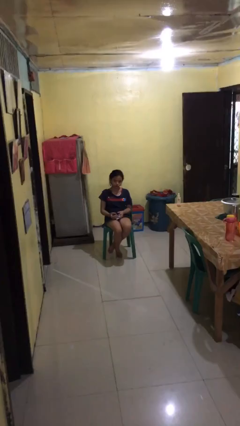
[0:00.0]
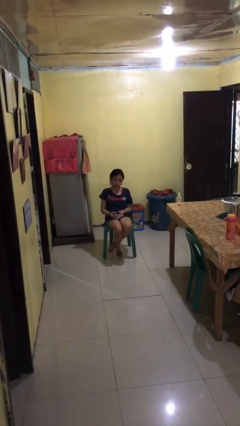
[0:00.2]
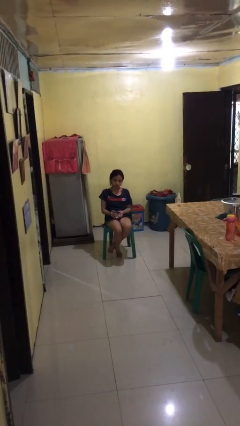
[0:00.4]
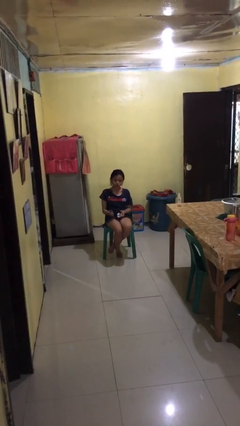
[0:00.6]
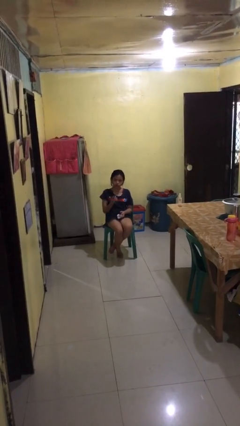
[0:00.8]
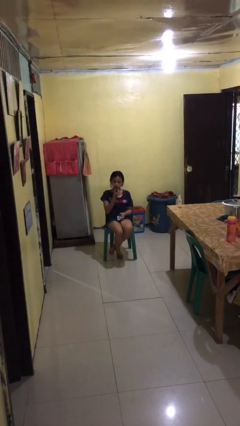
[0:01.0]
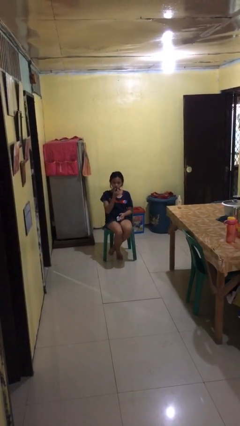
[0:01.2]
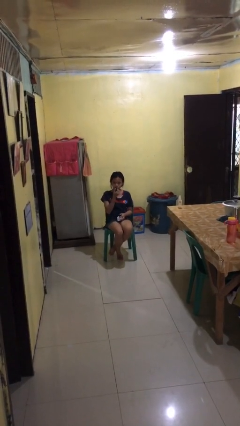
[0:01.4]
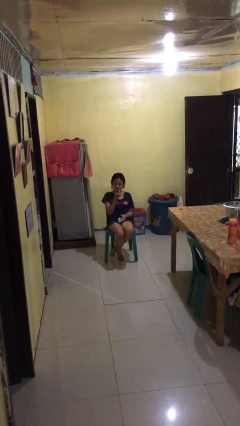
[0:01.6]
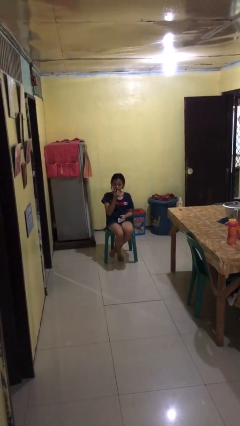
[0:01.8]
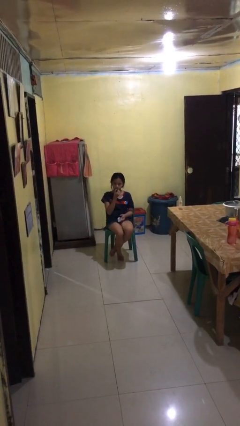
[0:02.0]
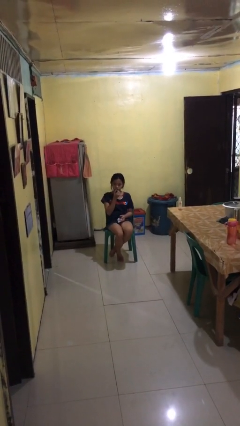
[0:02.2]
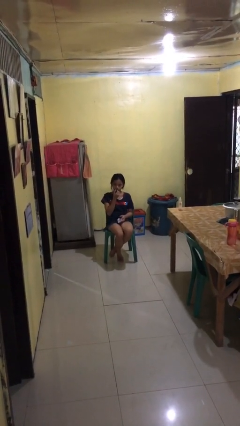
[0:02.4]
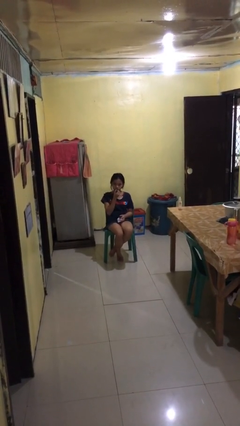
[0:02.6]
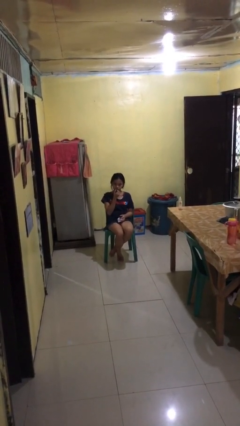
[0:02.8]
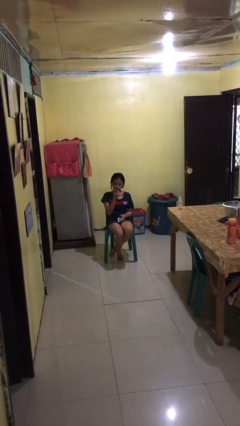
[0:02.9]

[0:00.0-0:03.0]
person applies lip makeup

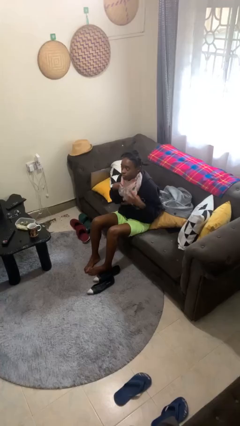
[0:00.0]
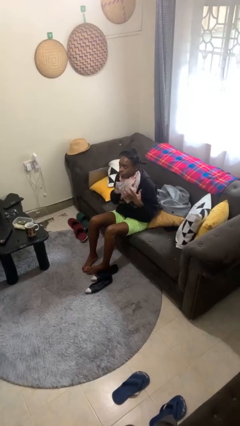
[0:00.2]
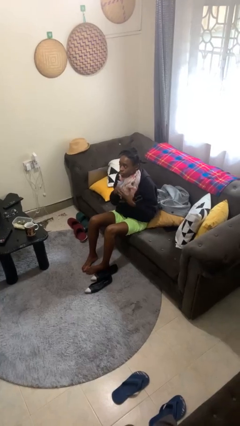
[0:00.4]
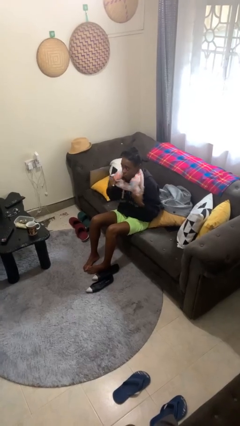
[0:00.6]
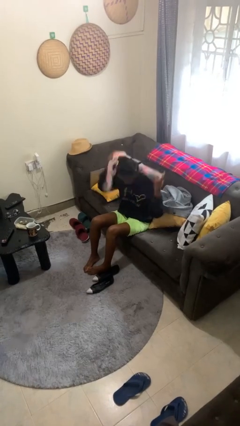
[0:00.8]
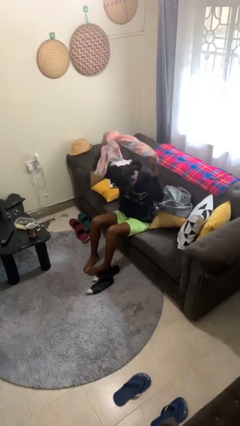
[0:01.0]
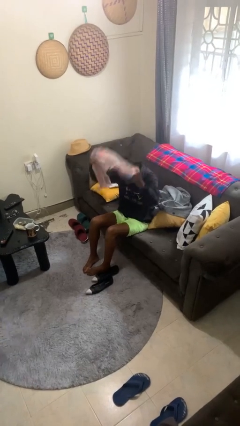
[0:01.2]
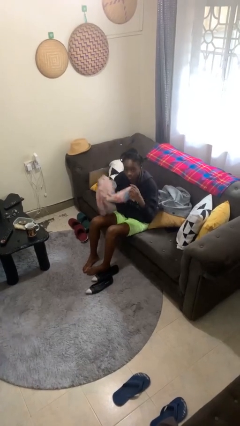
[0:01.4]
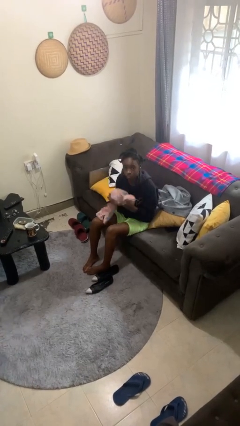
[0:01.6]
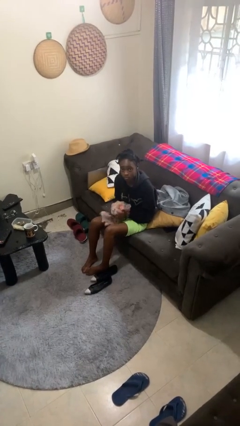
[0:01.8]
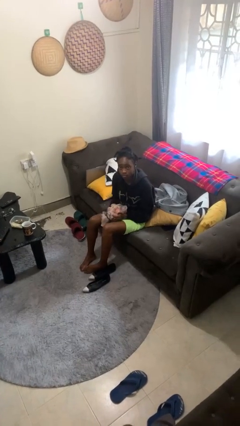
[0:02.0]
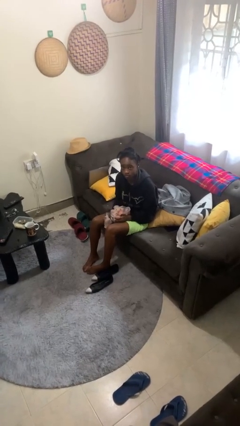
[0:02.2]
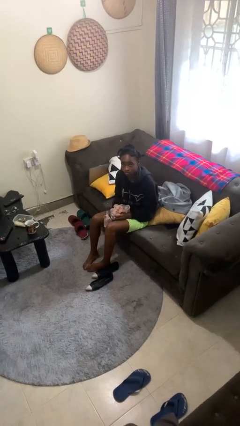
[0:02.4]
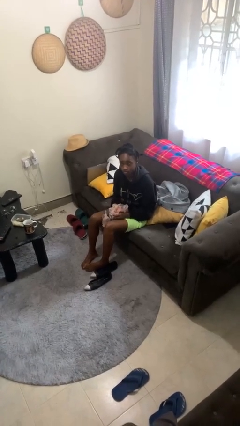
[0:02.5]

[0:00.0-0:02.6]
person takes off scarf

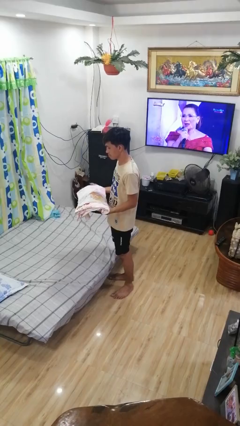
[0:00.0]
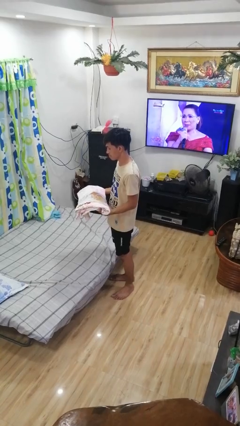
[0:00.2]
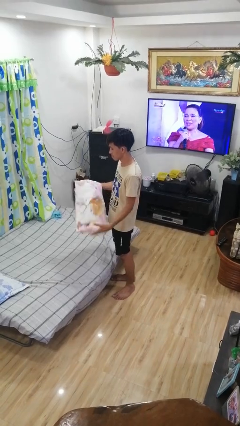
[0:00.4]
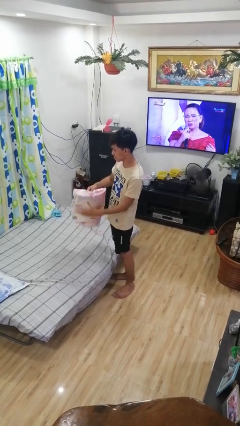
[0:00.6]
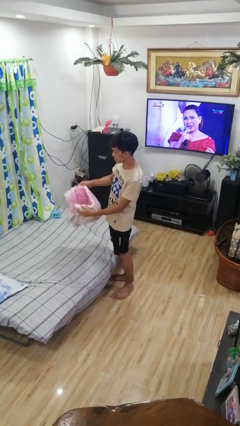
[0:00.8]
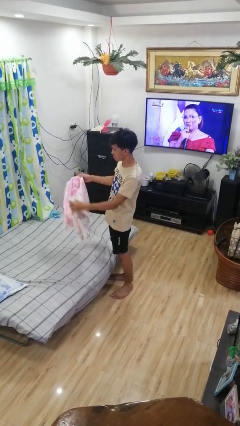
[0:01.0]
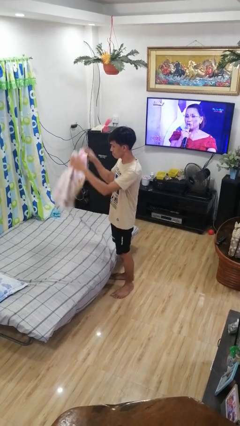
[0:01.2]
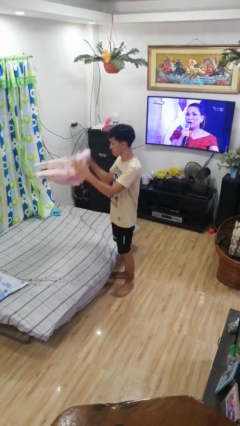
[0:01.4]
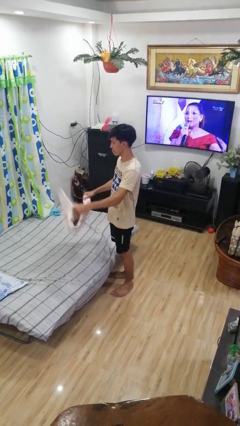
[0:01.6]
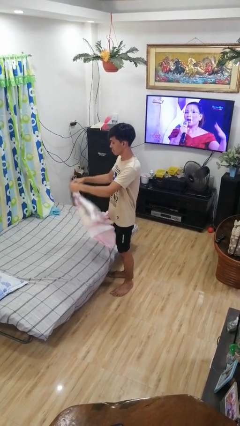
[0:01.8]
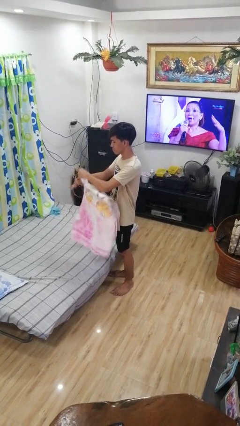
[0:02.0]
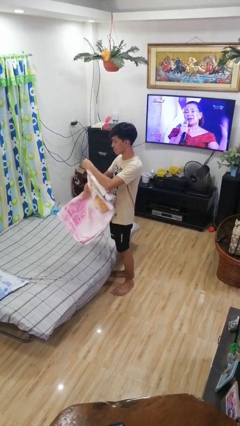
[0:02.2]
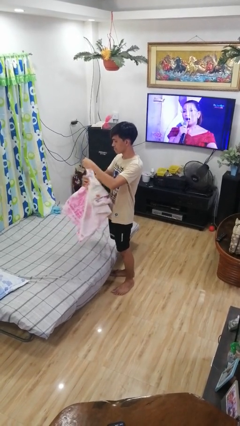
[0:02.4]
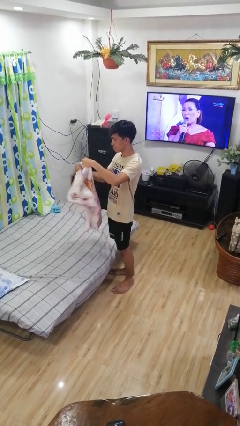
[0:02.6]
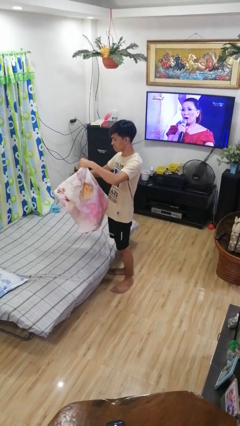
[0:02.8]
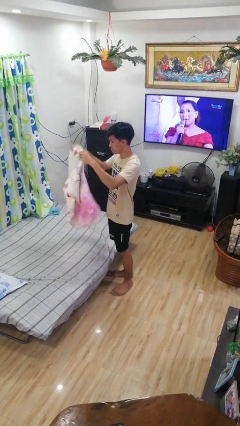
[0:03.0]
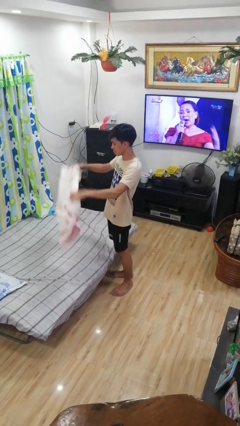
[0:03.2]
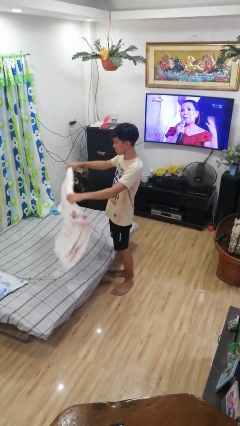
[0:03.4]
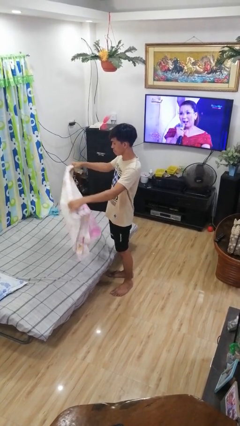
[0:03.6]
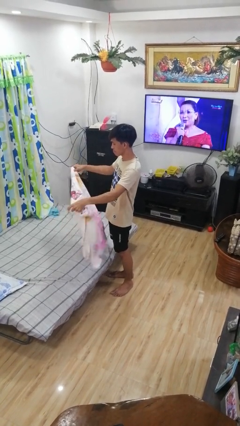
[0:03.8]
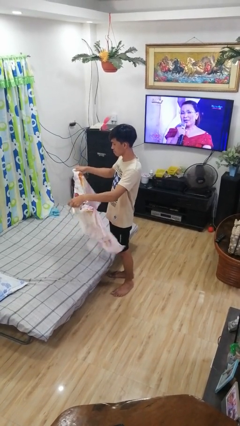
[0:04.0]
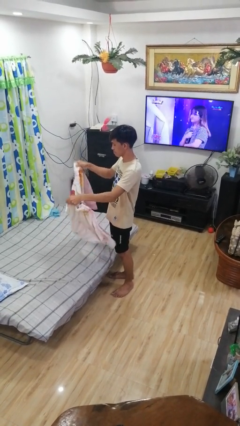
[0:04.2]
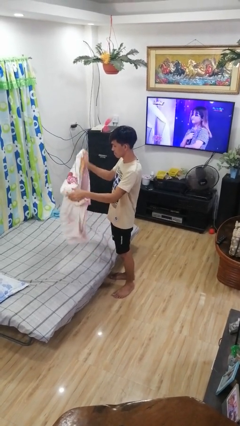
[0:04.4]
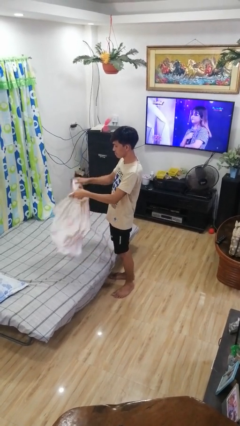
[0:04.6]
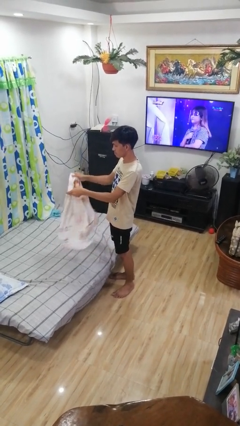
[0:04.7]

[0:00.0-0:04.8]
person unfolds blanket

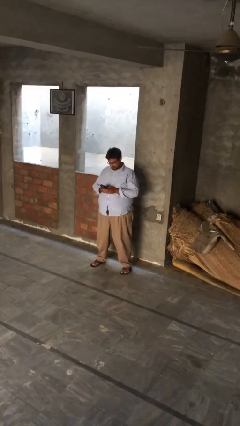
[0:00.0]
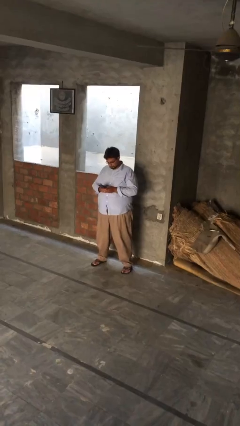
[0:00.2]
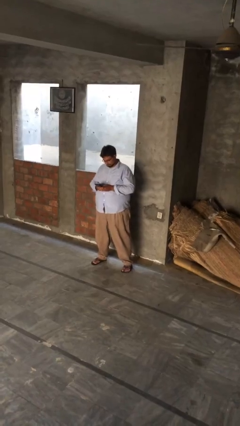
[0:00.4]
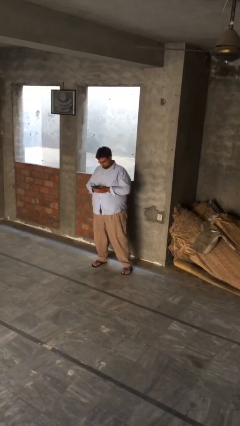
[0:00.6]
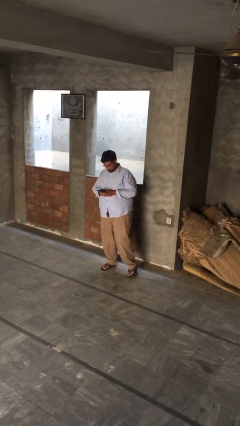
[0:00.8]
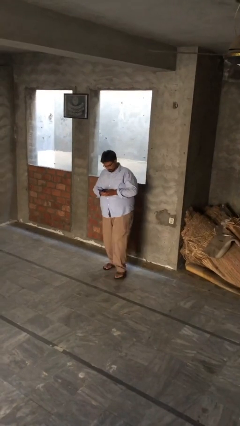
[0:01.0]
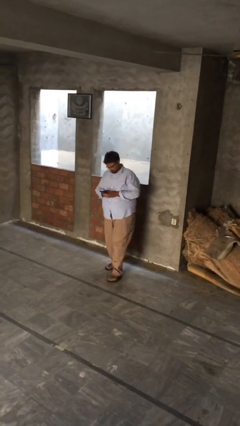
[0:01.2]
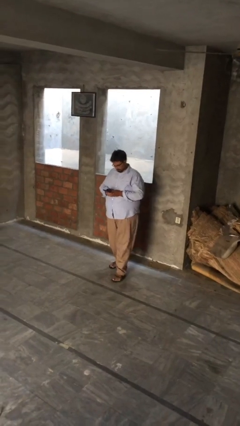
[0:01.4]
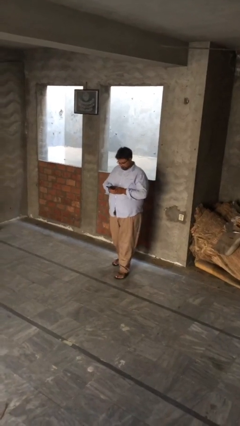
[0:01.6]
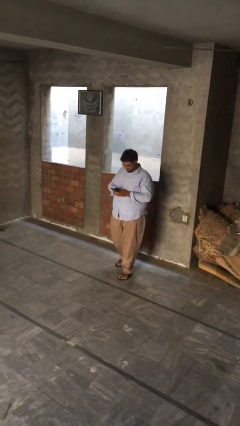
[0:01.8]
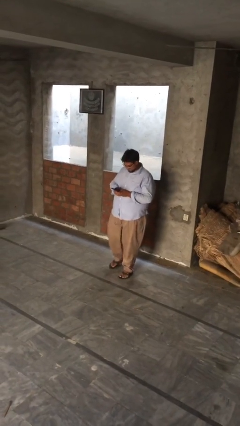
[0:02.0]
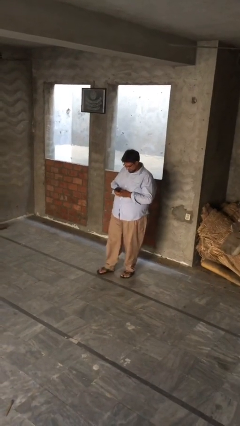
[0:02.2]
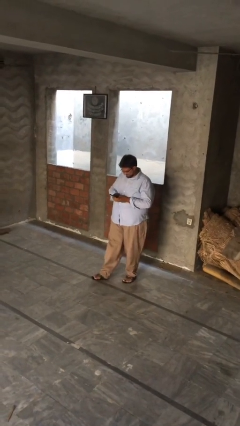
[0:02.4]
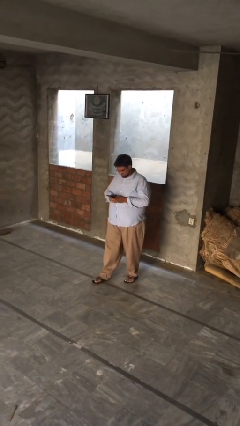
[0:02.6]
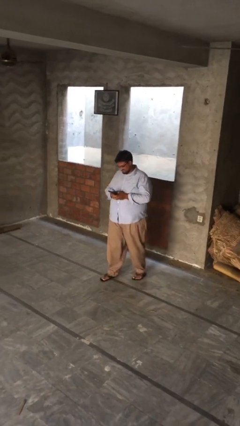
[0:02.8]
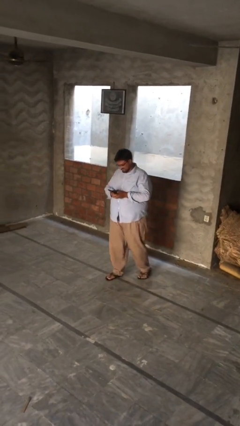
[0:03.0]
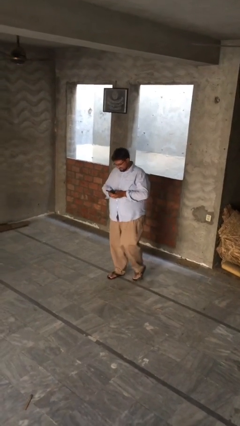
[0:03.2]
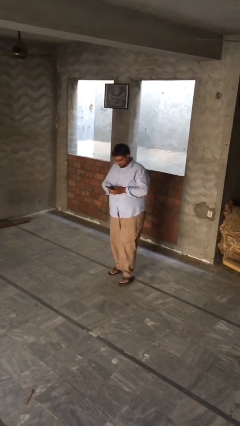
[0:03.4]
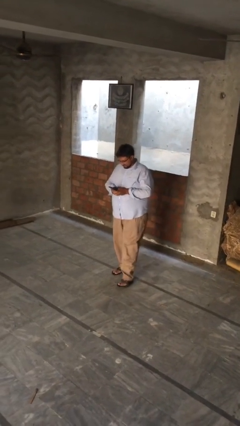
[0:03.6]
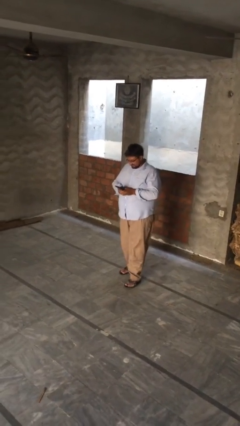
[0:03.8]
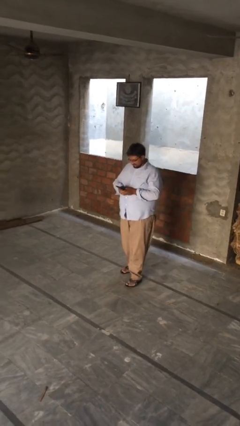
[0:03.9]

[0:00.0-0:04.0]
person texts on phone

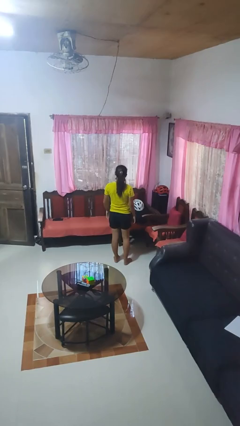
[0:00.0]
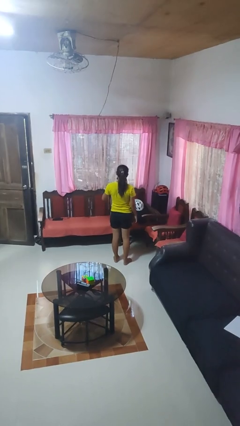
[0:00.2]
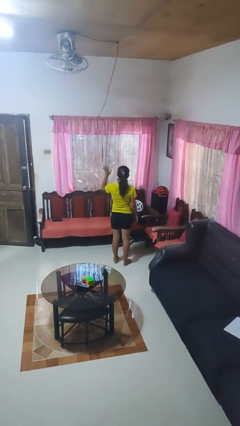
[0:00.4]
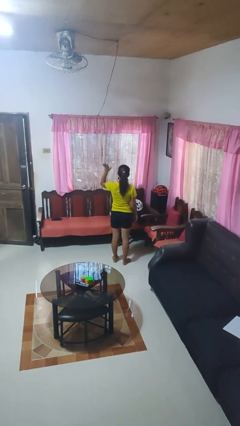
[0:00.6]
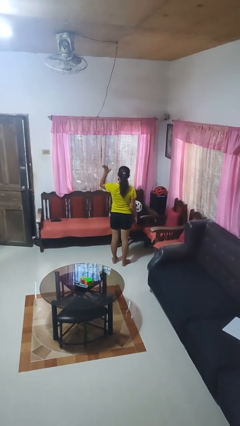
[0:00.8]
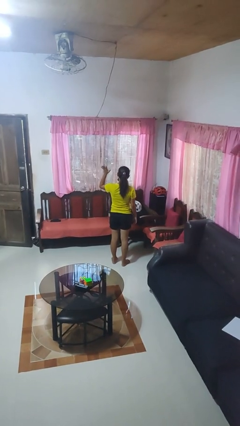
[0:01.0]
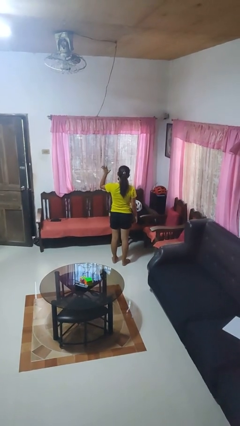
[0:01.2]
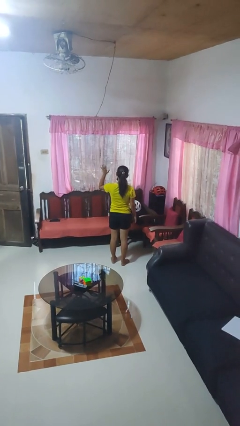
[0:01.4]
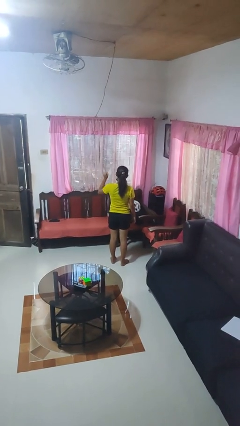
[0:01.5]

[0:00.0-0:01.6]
person gestures number five

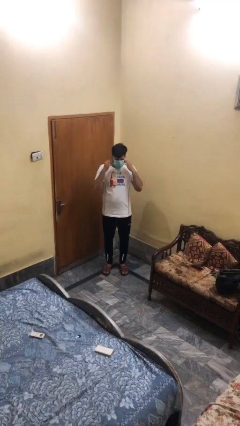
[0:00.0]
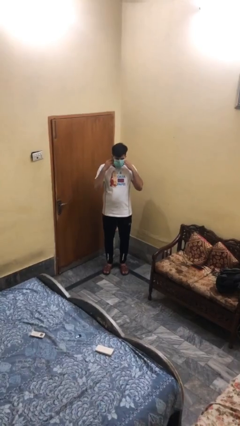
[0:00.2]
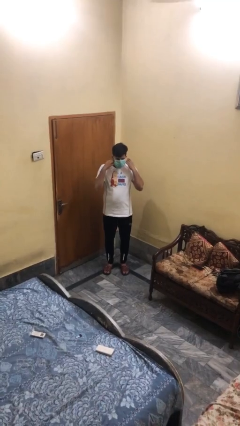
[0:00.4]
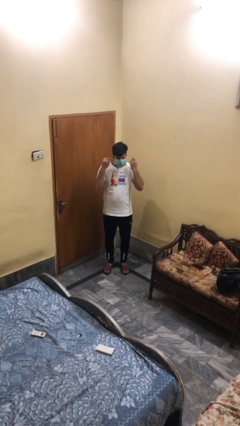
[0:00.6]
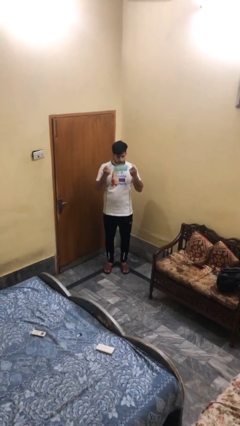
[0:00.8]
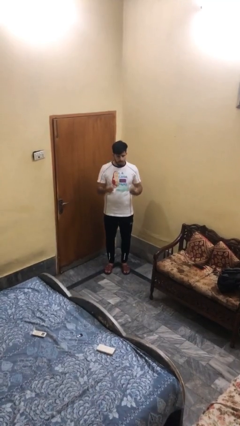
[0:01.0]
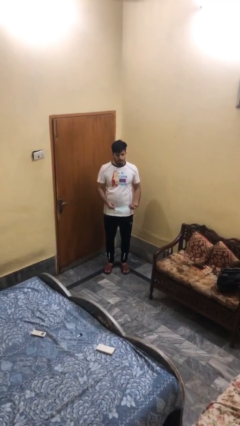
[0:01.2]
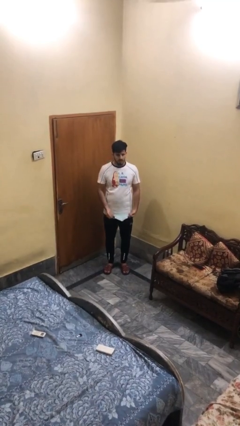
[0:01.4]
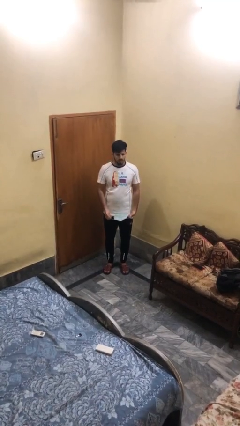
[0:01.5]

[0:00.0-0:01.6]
person takes off facemask

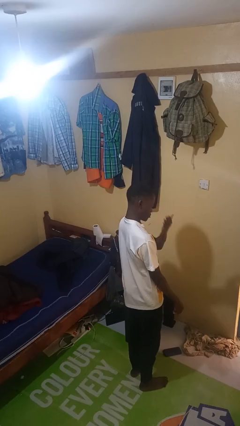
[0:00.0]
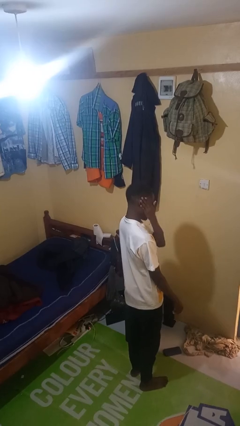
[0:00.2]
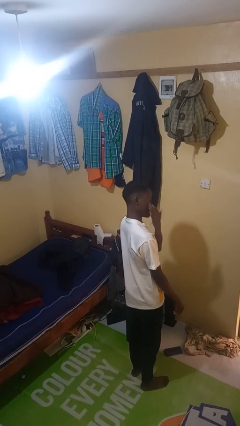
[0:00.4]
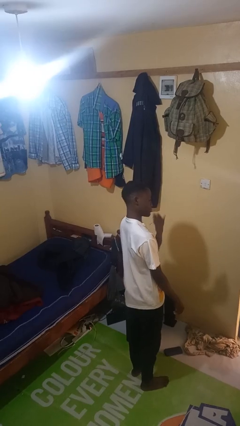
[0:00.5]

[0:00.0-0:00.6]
person swats bug
